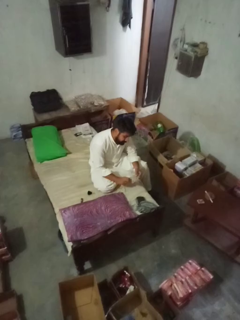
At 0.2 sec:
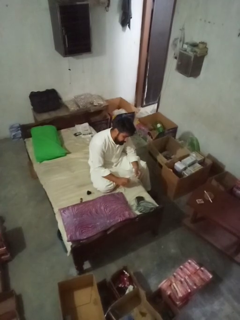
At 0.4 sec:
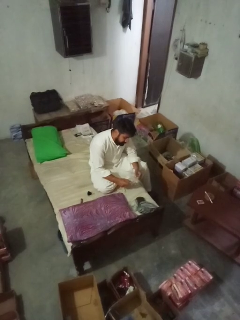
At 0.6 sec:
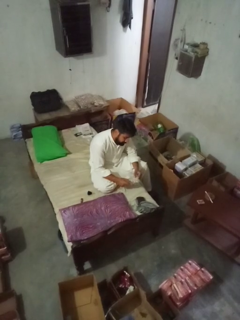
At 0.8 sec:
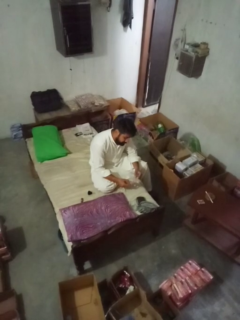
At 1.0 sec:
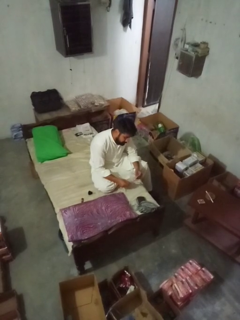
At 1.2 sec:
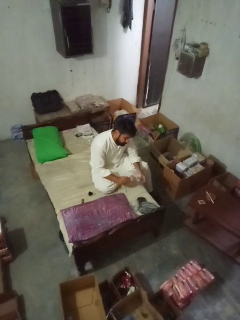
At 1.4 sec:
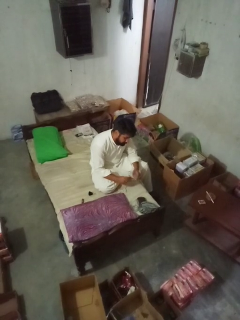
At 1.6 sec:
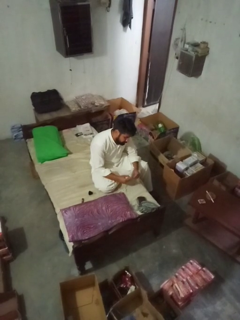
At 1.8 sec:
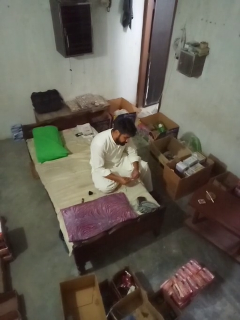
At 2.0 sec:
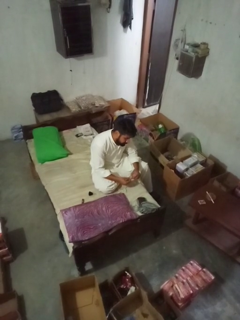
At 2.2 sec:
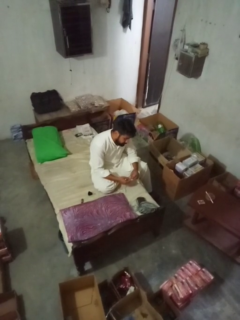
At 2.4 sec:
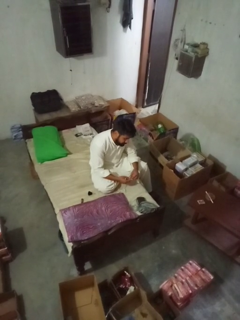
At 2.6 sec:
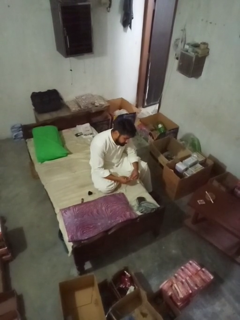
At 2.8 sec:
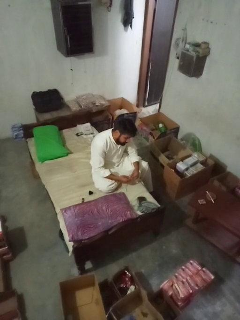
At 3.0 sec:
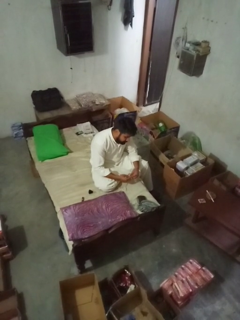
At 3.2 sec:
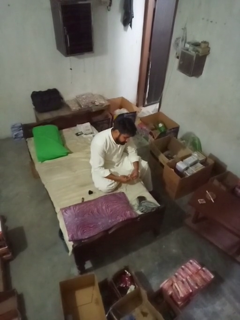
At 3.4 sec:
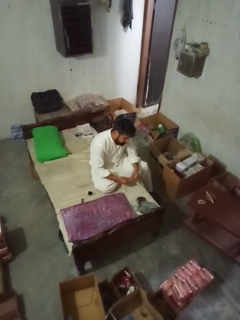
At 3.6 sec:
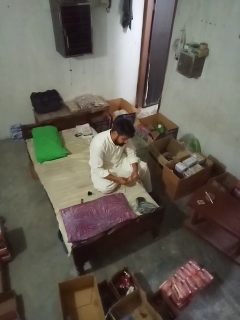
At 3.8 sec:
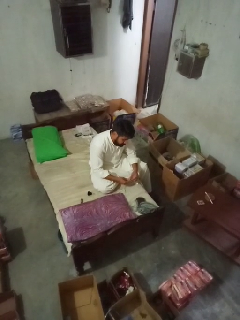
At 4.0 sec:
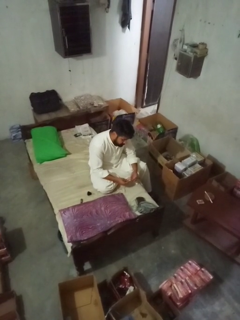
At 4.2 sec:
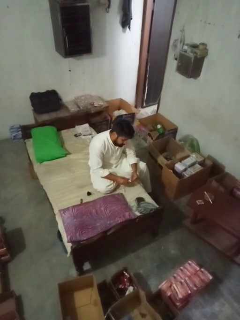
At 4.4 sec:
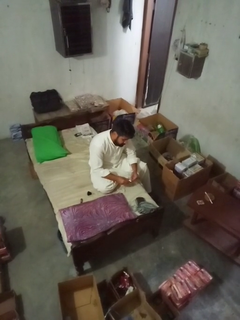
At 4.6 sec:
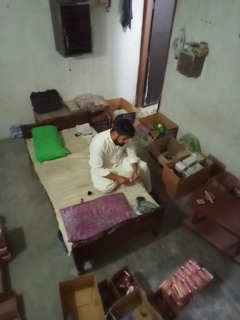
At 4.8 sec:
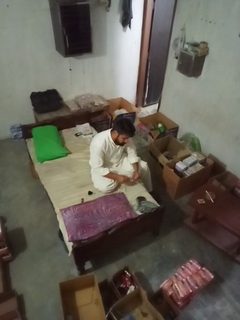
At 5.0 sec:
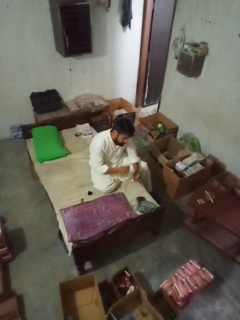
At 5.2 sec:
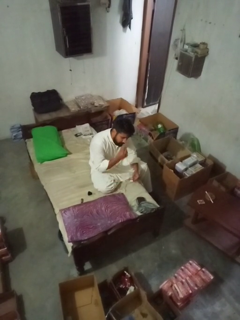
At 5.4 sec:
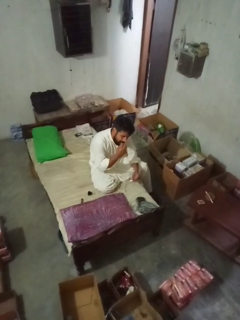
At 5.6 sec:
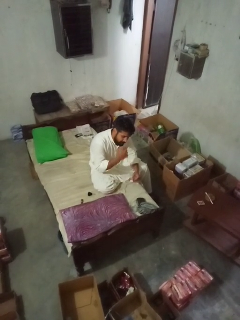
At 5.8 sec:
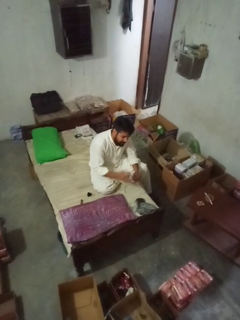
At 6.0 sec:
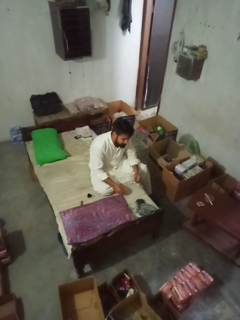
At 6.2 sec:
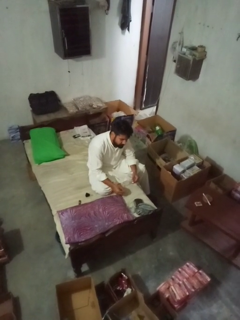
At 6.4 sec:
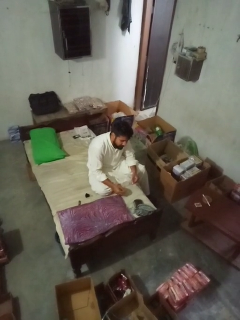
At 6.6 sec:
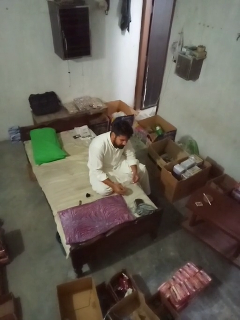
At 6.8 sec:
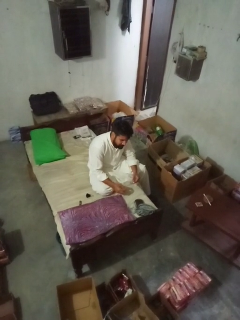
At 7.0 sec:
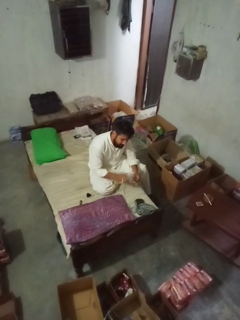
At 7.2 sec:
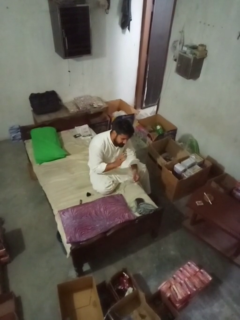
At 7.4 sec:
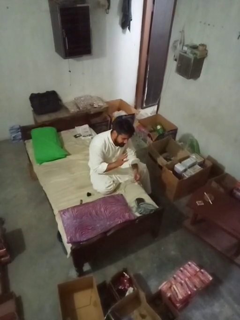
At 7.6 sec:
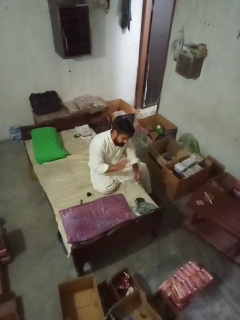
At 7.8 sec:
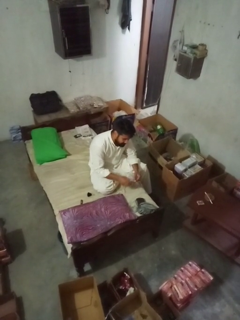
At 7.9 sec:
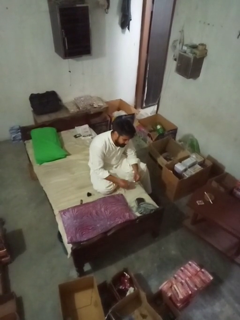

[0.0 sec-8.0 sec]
person licks fingers

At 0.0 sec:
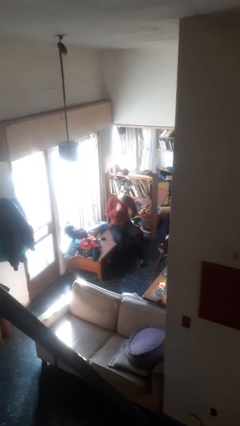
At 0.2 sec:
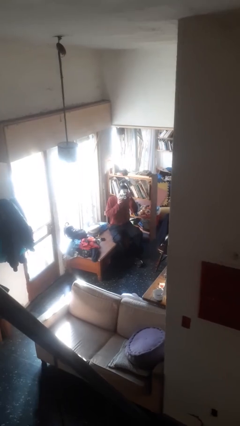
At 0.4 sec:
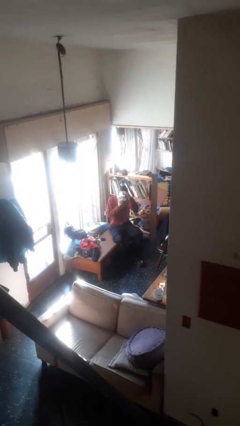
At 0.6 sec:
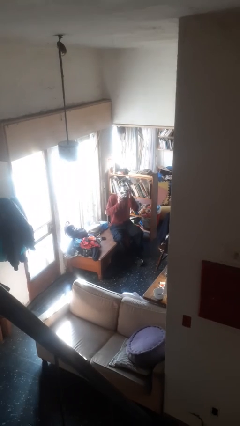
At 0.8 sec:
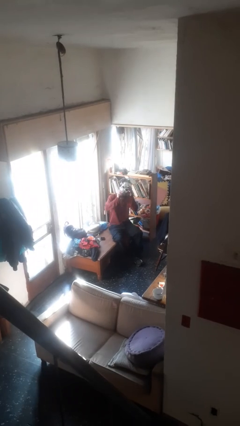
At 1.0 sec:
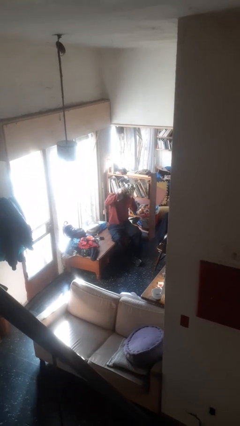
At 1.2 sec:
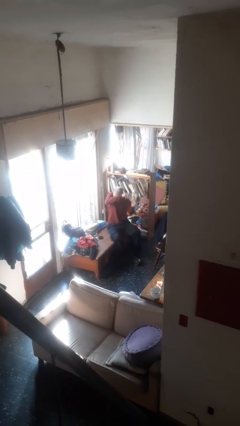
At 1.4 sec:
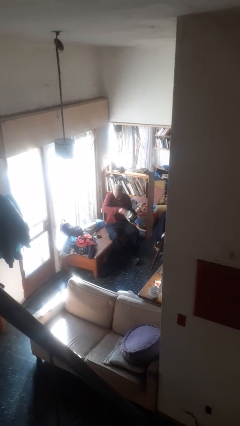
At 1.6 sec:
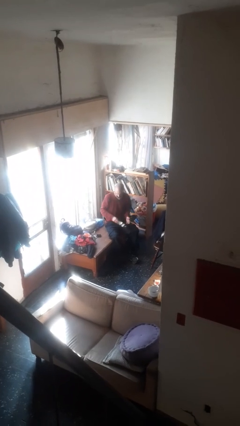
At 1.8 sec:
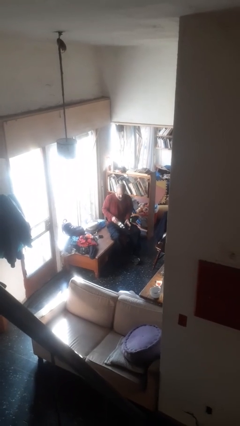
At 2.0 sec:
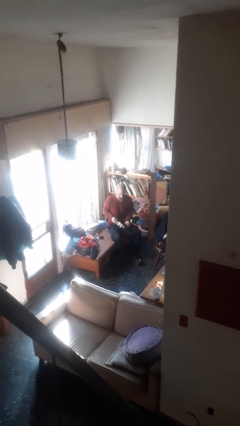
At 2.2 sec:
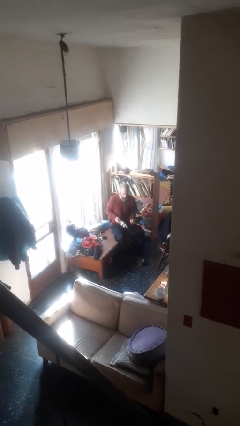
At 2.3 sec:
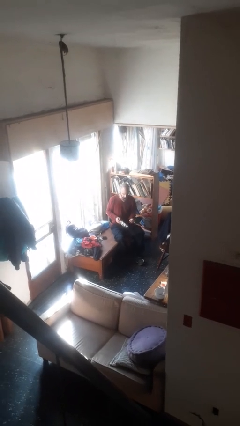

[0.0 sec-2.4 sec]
person takes off facemask

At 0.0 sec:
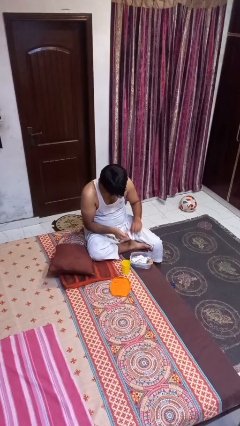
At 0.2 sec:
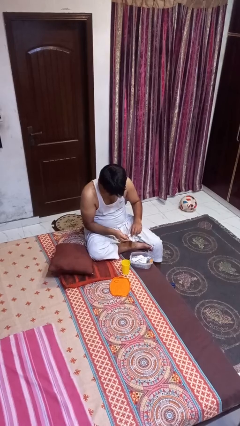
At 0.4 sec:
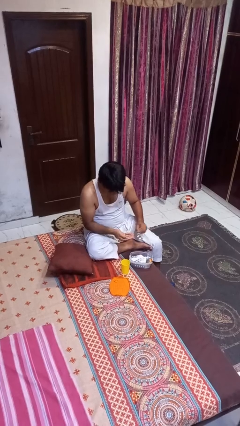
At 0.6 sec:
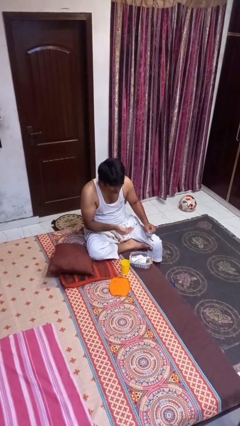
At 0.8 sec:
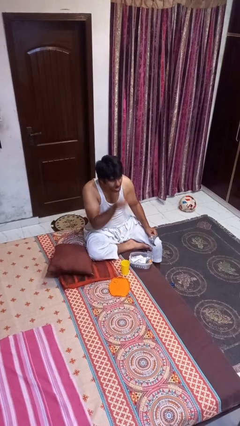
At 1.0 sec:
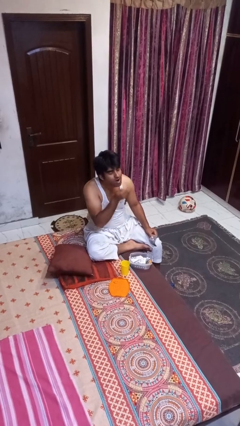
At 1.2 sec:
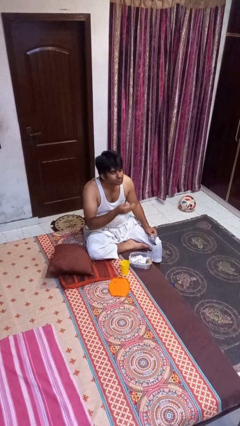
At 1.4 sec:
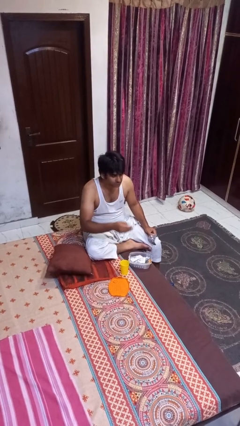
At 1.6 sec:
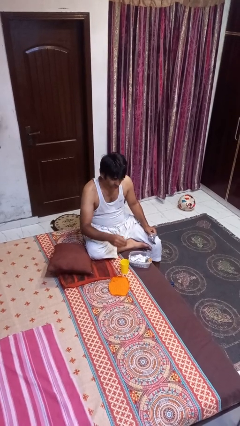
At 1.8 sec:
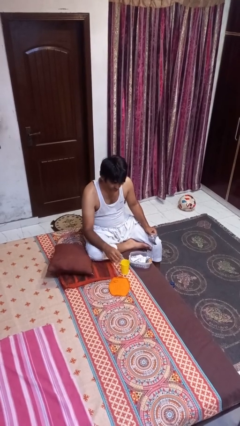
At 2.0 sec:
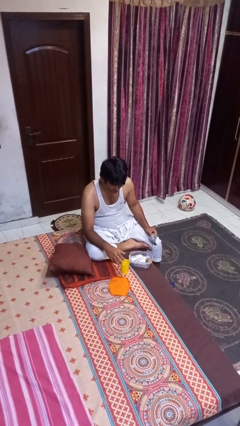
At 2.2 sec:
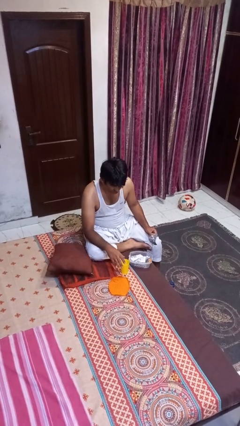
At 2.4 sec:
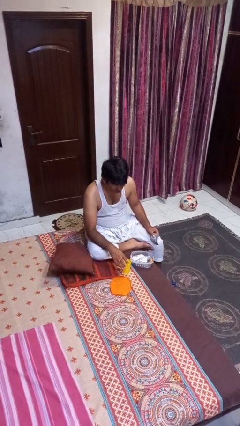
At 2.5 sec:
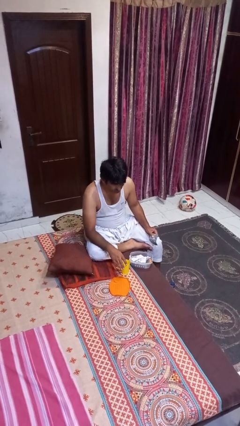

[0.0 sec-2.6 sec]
person takes medicine pills

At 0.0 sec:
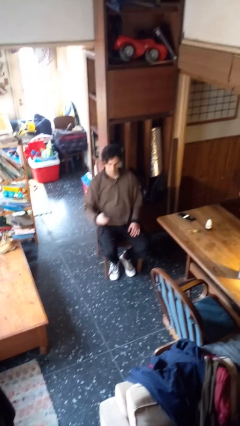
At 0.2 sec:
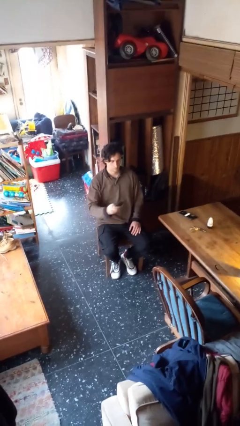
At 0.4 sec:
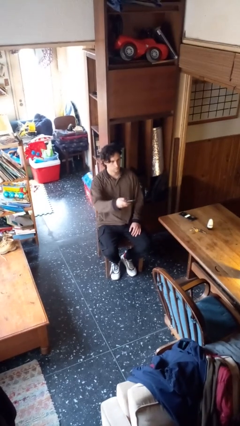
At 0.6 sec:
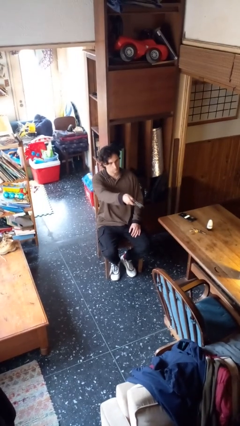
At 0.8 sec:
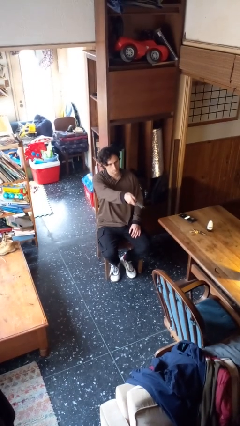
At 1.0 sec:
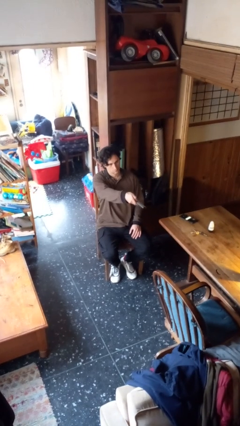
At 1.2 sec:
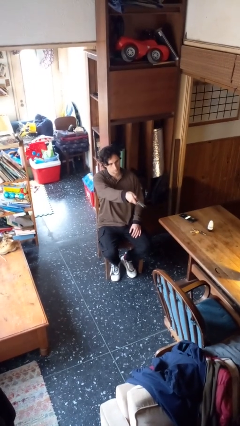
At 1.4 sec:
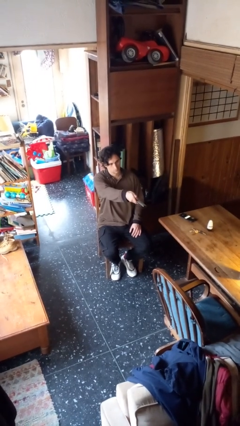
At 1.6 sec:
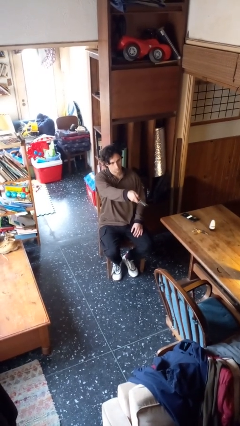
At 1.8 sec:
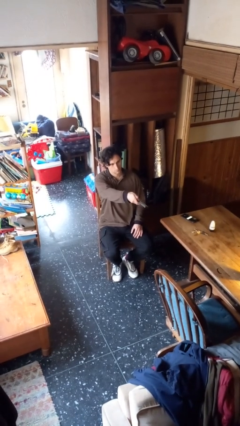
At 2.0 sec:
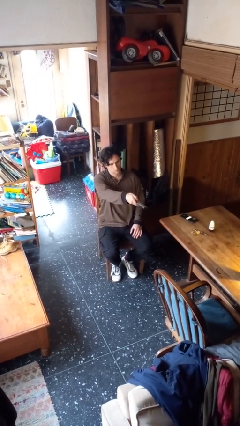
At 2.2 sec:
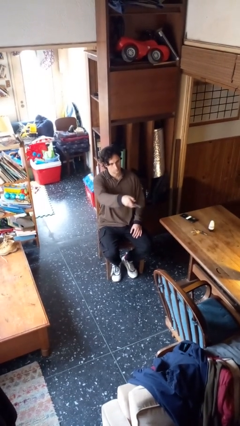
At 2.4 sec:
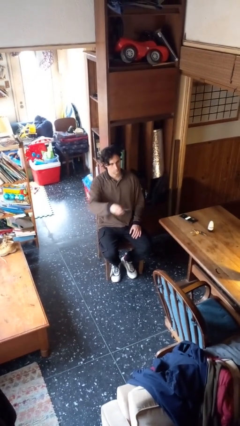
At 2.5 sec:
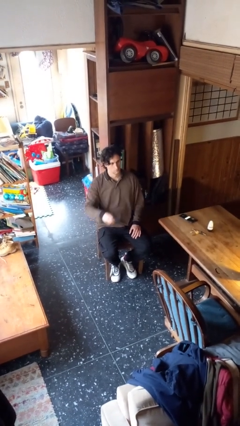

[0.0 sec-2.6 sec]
person uses television remote

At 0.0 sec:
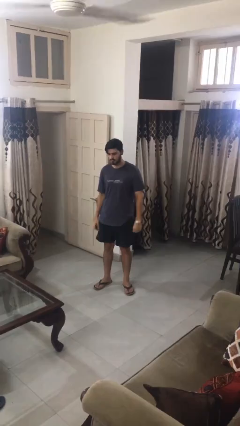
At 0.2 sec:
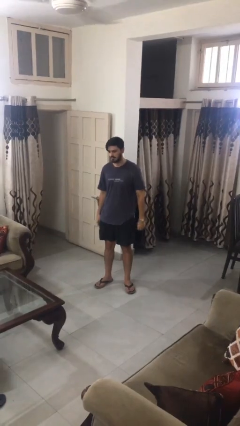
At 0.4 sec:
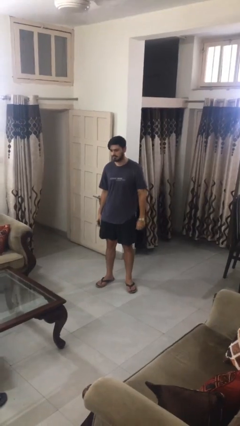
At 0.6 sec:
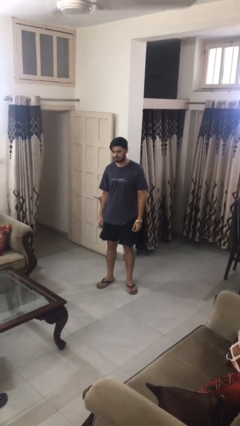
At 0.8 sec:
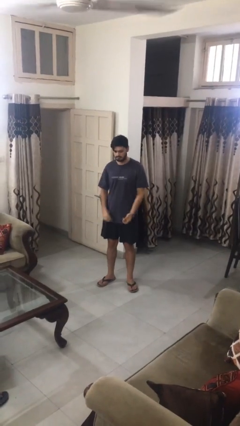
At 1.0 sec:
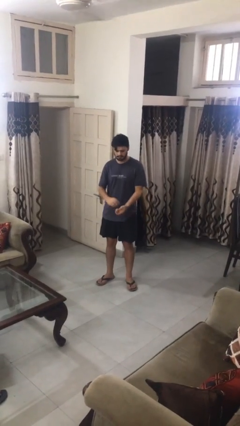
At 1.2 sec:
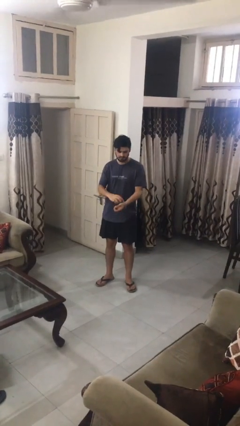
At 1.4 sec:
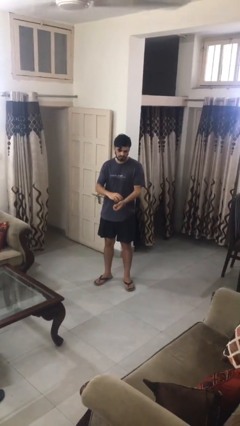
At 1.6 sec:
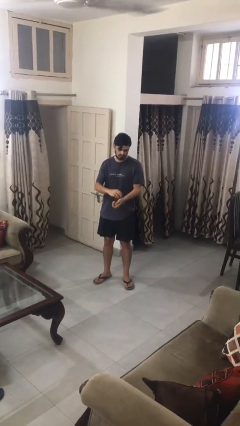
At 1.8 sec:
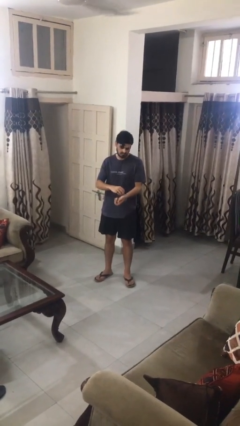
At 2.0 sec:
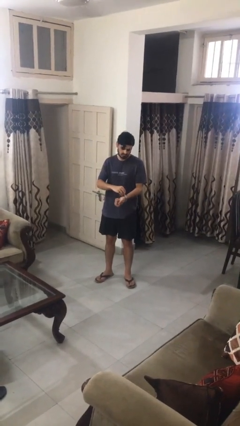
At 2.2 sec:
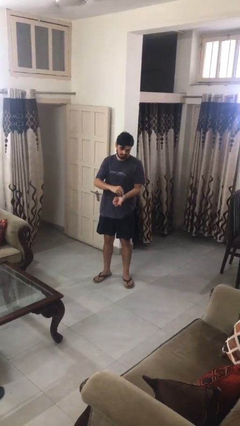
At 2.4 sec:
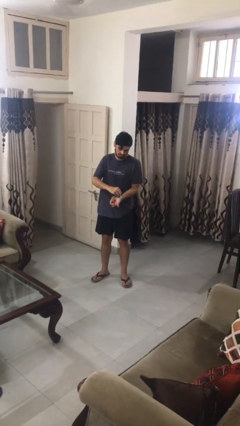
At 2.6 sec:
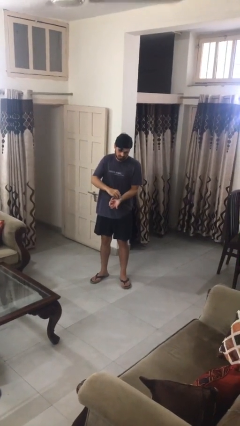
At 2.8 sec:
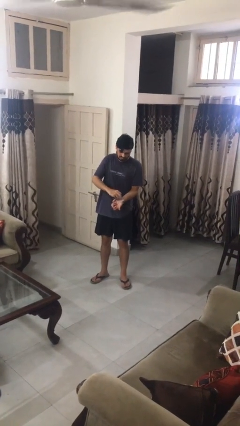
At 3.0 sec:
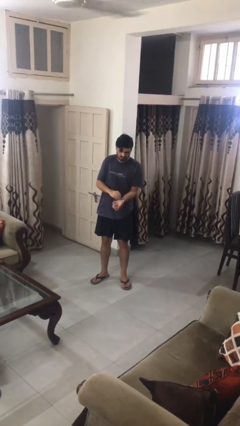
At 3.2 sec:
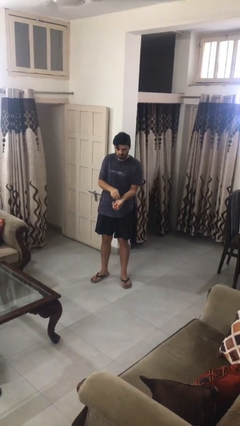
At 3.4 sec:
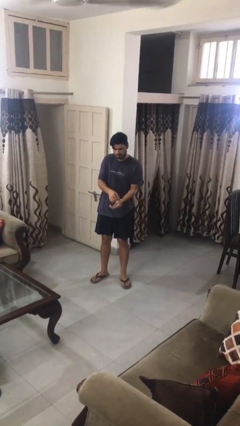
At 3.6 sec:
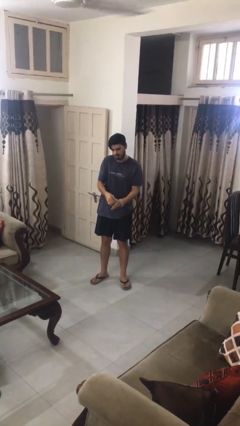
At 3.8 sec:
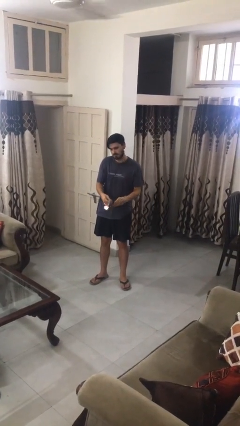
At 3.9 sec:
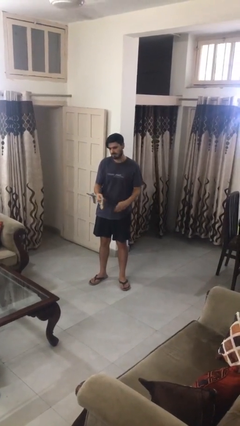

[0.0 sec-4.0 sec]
person takes off wristwatch
